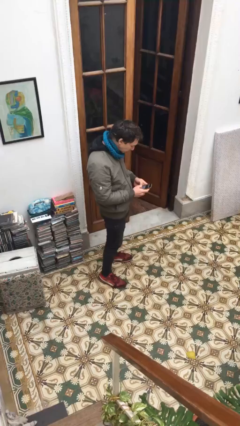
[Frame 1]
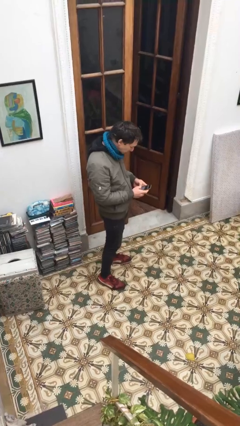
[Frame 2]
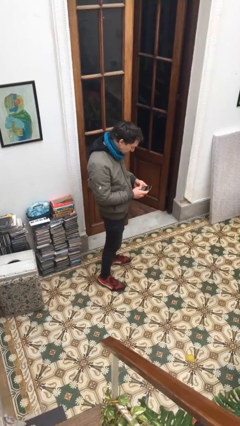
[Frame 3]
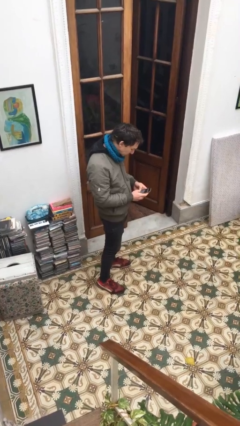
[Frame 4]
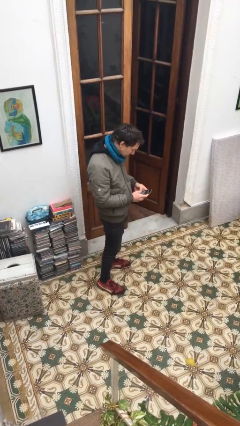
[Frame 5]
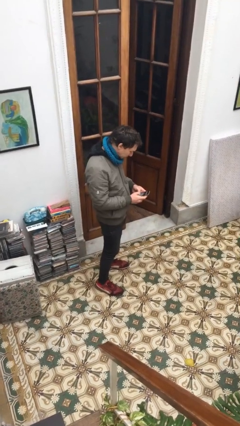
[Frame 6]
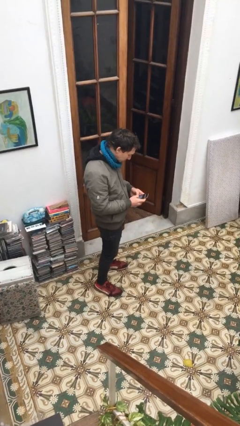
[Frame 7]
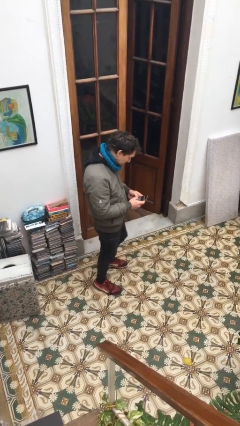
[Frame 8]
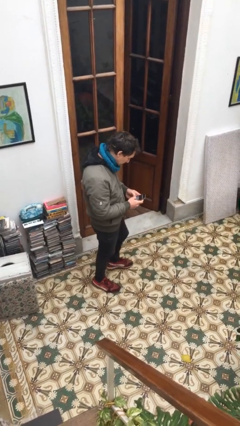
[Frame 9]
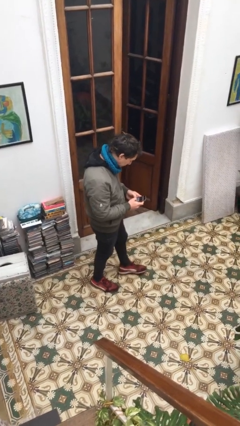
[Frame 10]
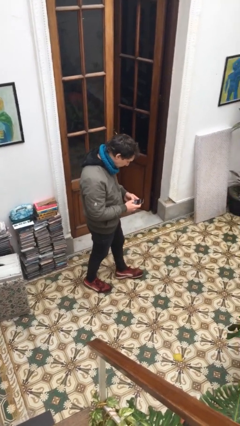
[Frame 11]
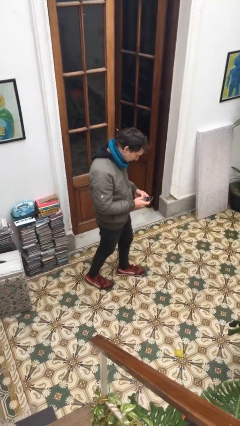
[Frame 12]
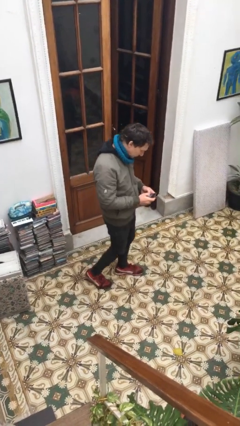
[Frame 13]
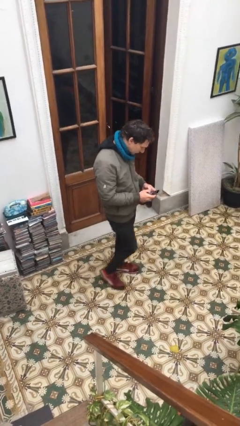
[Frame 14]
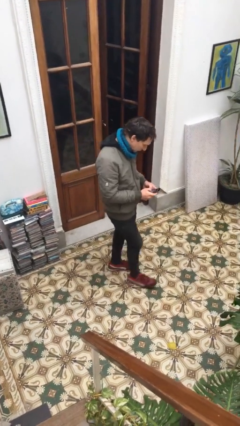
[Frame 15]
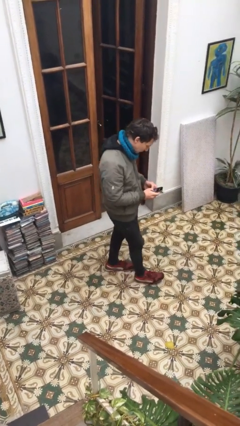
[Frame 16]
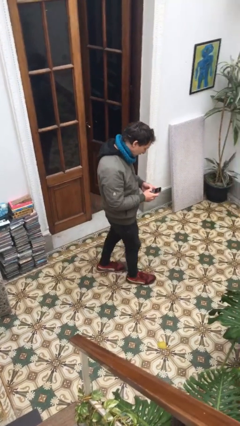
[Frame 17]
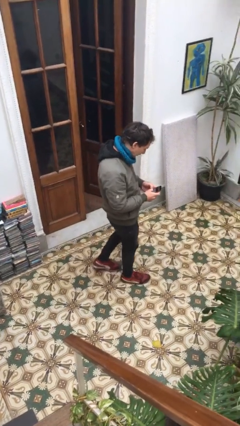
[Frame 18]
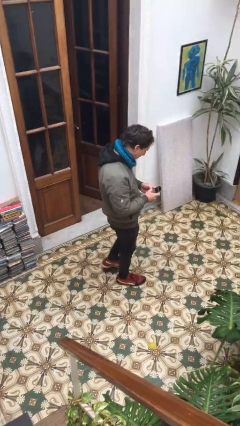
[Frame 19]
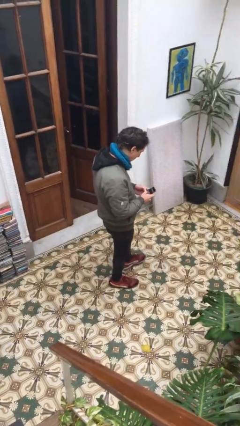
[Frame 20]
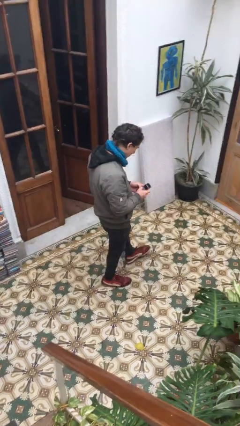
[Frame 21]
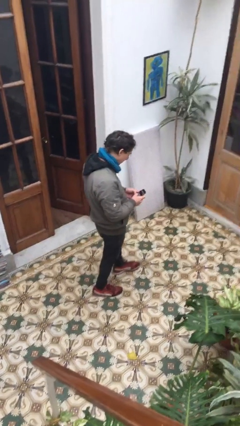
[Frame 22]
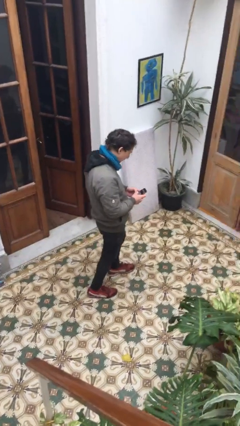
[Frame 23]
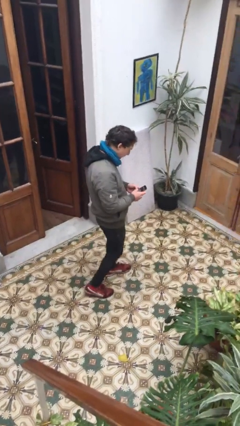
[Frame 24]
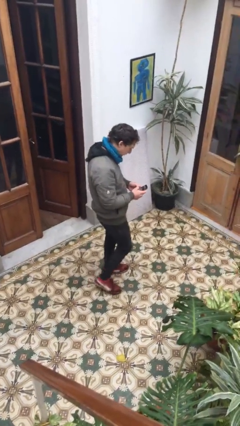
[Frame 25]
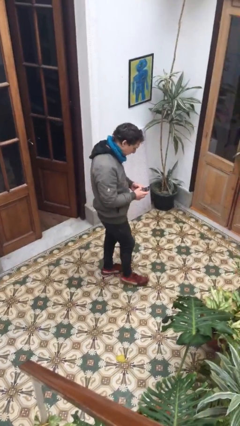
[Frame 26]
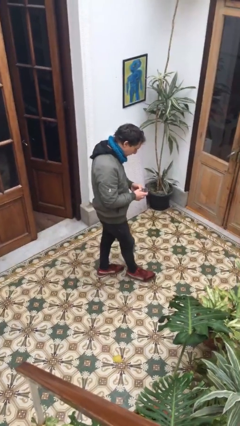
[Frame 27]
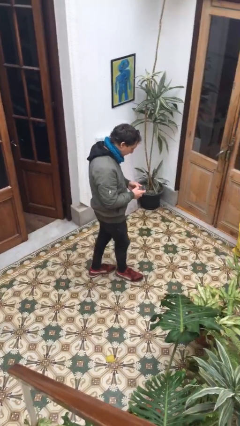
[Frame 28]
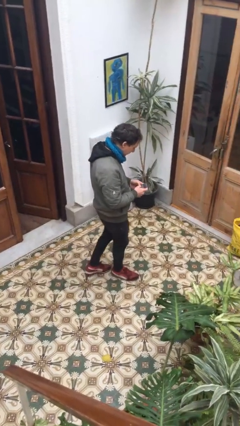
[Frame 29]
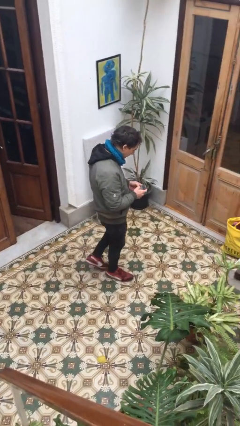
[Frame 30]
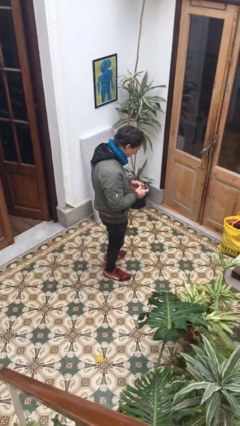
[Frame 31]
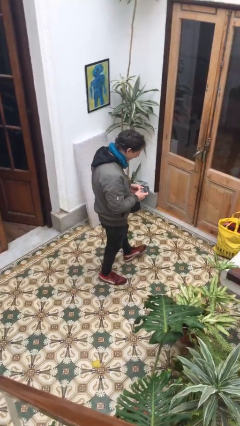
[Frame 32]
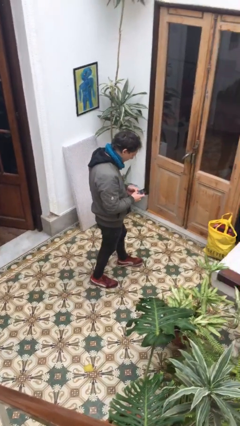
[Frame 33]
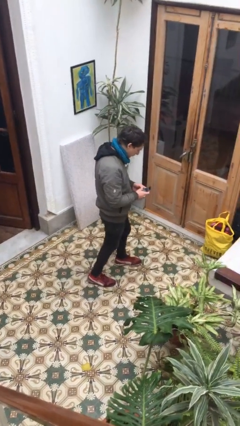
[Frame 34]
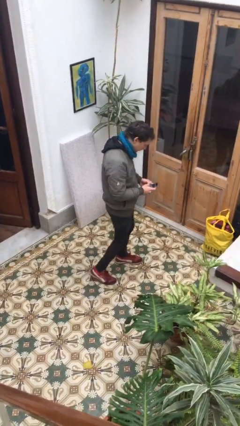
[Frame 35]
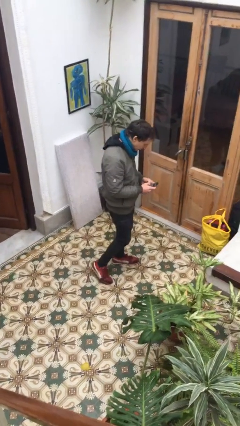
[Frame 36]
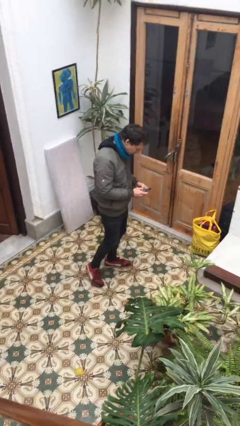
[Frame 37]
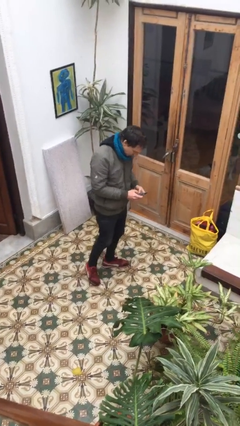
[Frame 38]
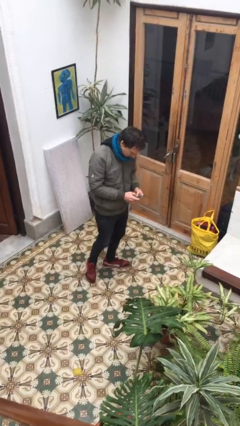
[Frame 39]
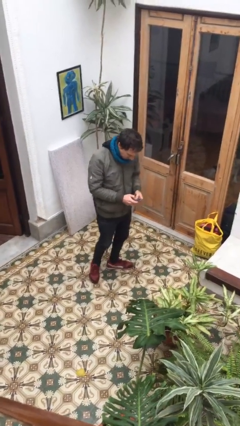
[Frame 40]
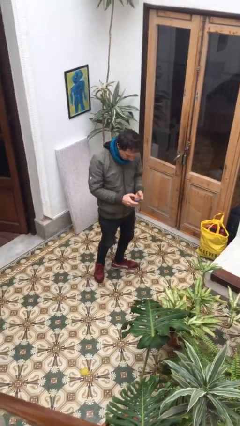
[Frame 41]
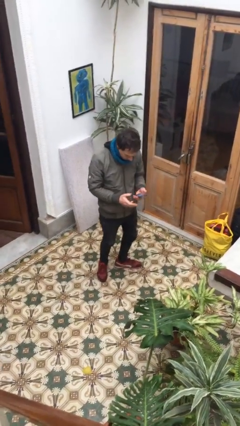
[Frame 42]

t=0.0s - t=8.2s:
person texts on phone

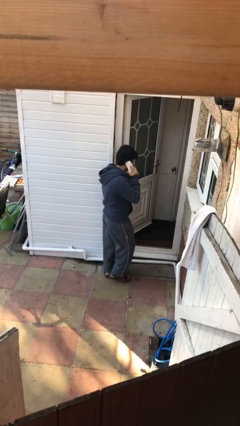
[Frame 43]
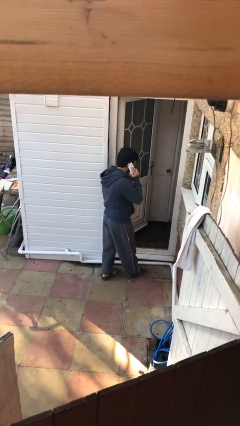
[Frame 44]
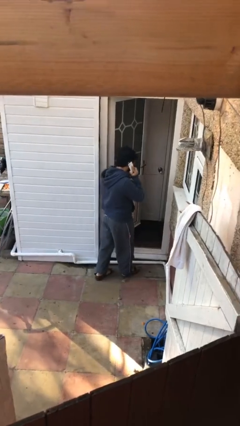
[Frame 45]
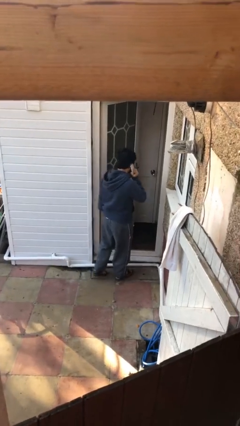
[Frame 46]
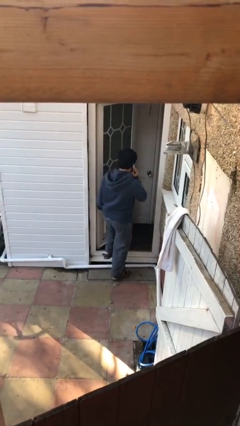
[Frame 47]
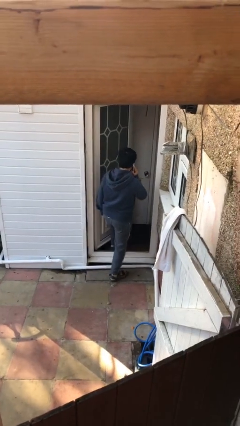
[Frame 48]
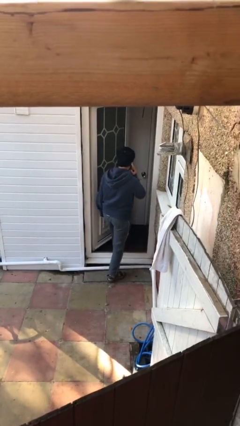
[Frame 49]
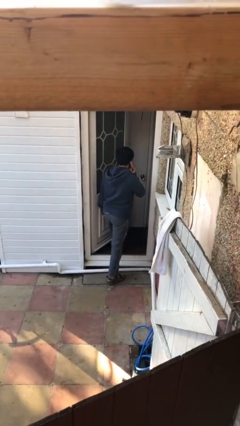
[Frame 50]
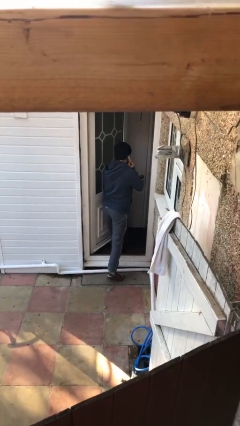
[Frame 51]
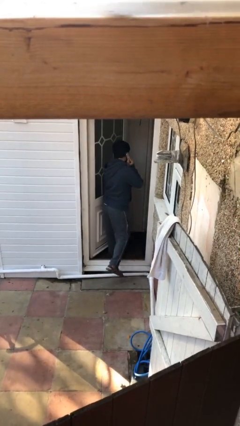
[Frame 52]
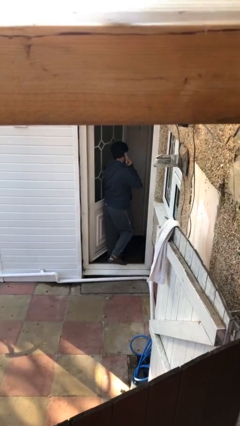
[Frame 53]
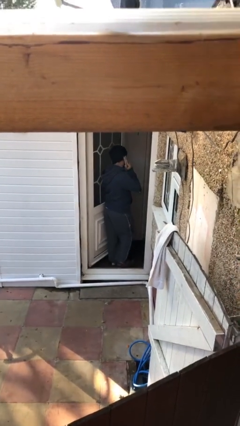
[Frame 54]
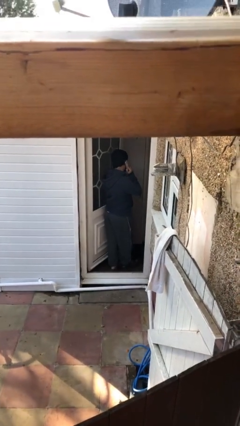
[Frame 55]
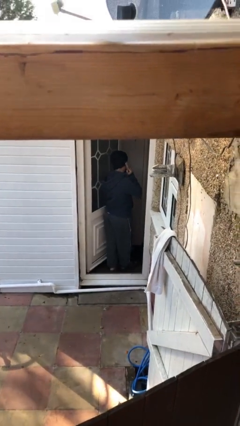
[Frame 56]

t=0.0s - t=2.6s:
person exits scene through structure

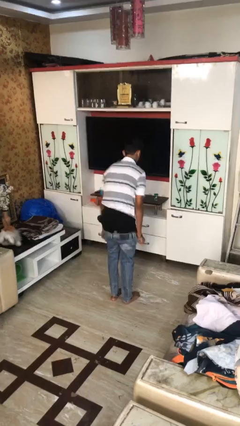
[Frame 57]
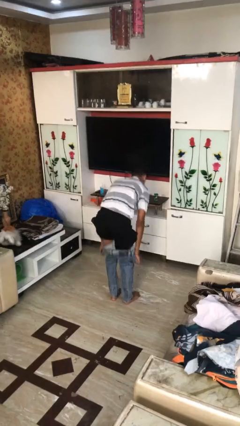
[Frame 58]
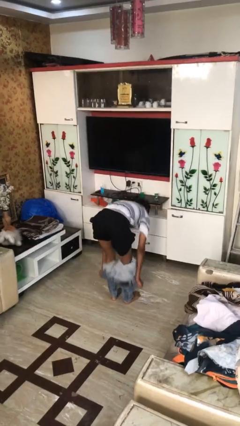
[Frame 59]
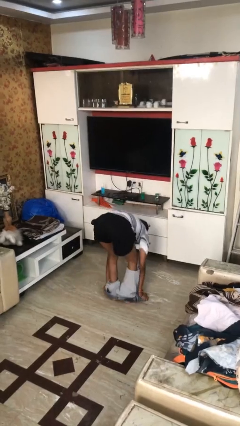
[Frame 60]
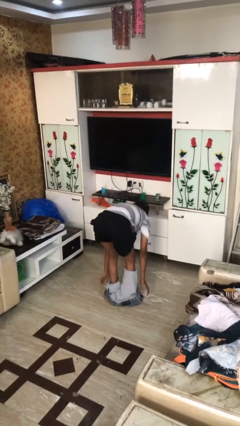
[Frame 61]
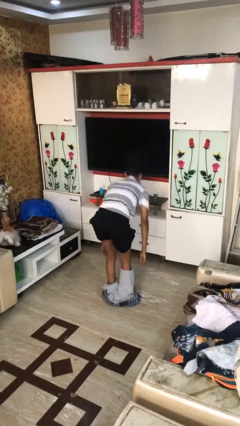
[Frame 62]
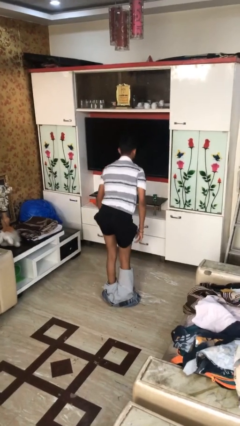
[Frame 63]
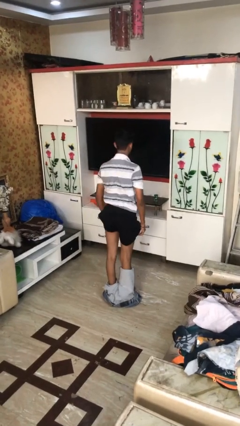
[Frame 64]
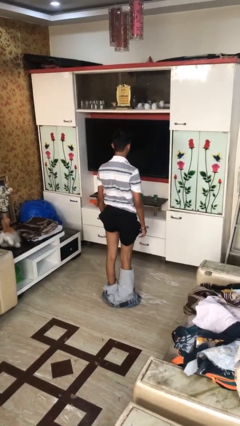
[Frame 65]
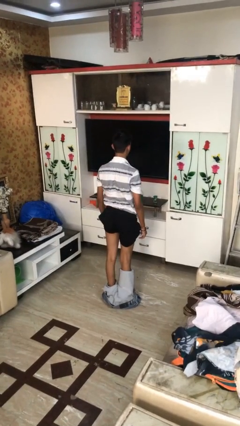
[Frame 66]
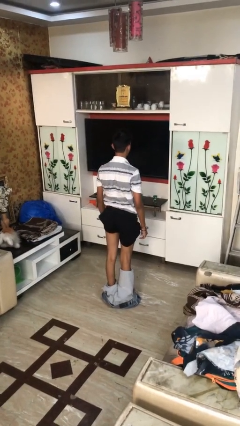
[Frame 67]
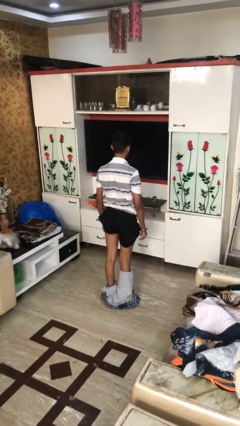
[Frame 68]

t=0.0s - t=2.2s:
person takes off pants

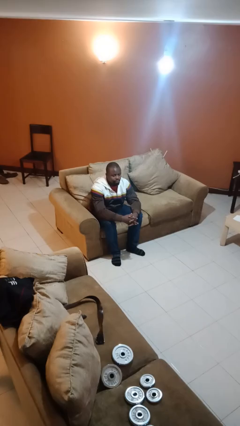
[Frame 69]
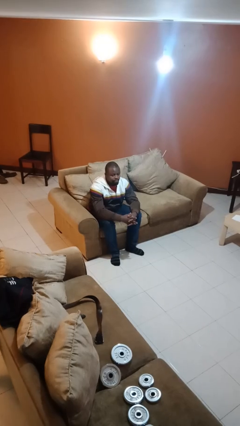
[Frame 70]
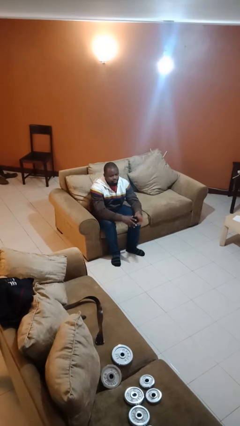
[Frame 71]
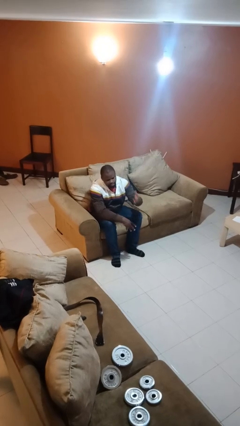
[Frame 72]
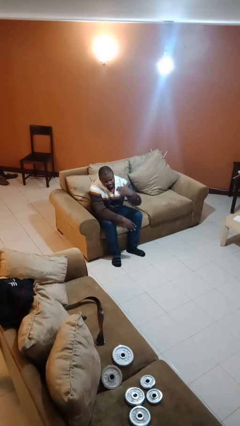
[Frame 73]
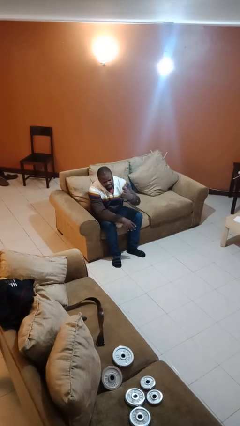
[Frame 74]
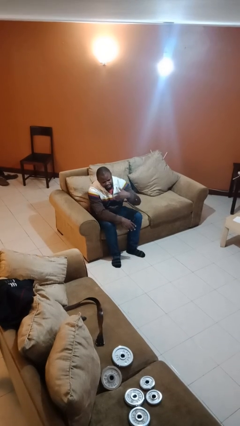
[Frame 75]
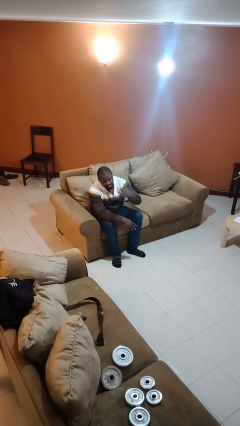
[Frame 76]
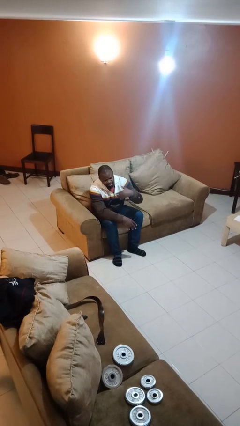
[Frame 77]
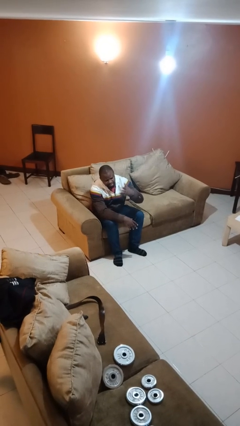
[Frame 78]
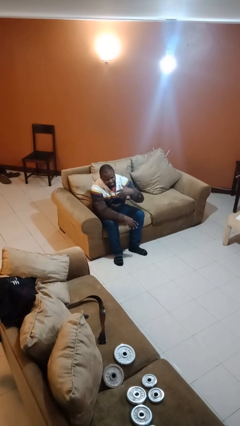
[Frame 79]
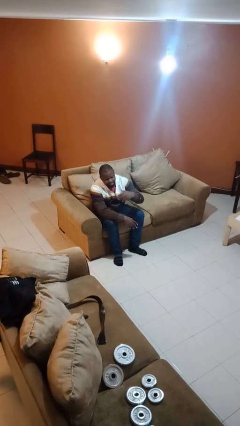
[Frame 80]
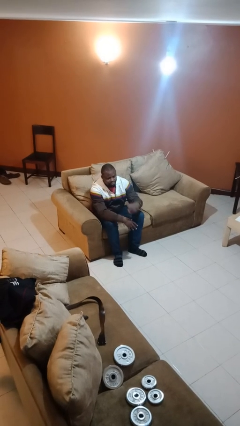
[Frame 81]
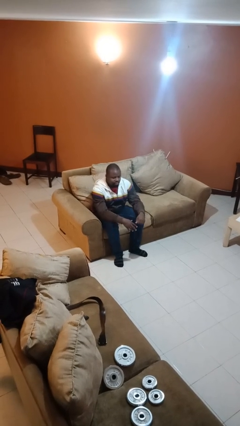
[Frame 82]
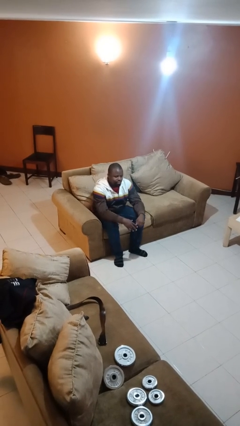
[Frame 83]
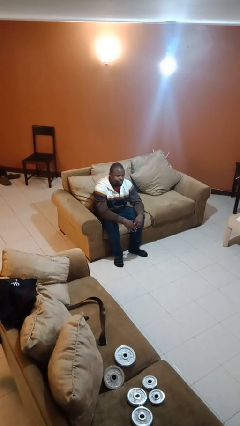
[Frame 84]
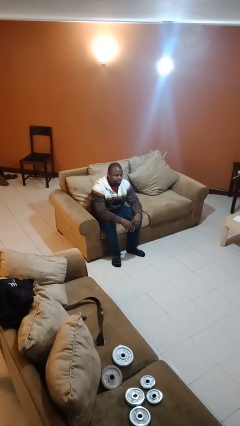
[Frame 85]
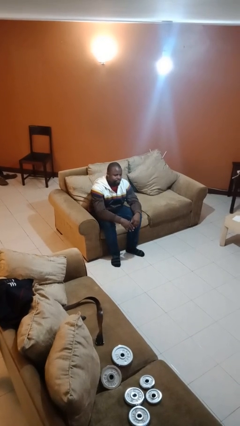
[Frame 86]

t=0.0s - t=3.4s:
person gestures come here

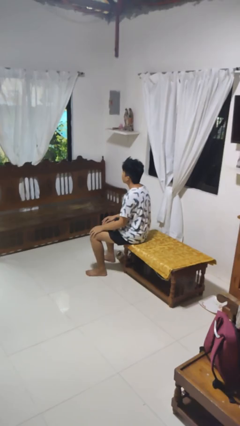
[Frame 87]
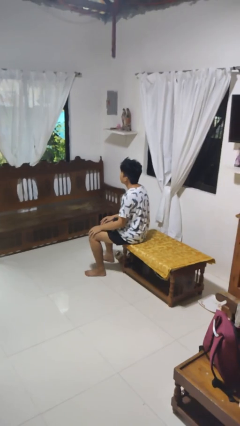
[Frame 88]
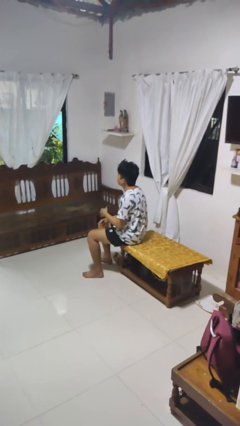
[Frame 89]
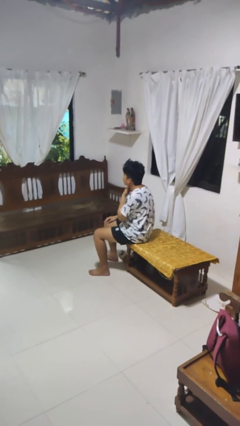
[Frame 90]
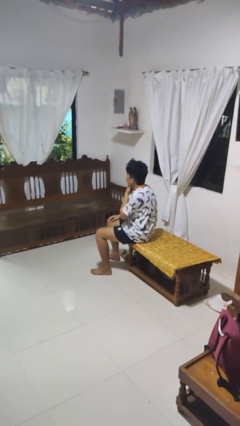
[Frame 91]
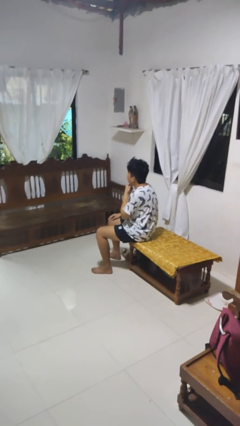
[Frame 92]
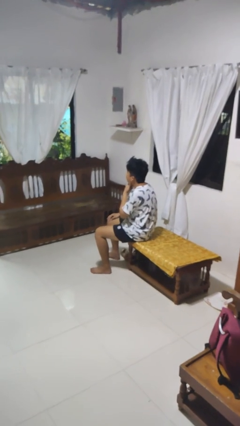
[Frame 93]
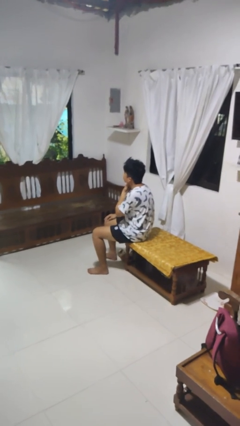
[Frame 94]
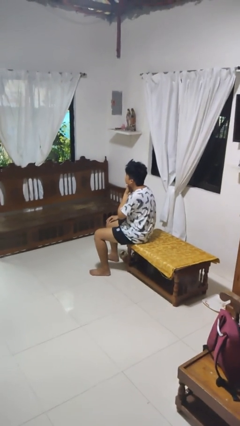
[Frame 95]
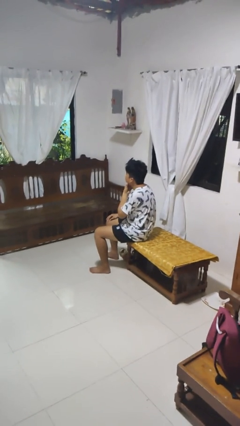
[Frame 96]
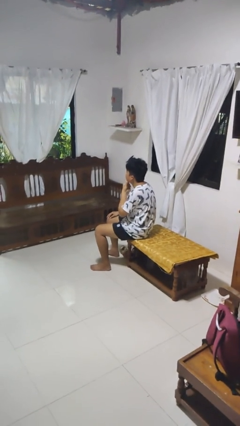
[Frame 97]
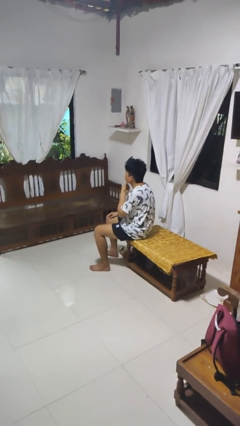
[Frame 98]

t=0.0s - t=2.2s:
person strokes chin
